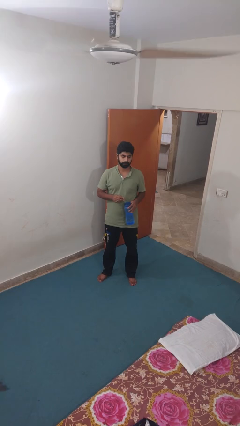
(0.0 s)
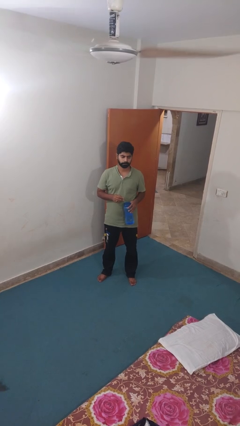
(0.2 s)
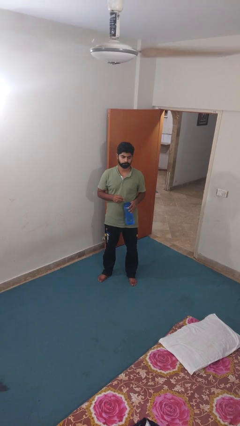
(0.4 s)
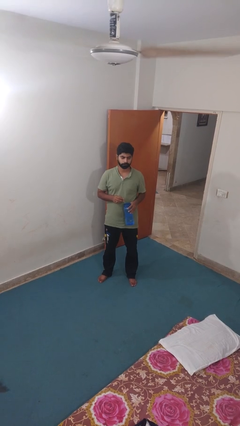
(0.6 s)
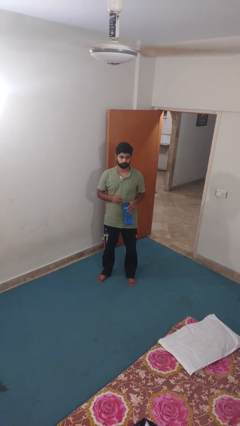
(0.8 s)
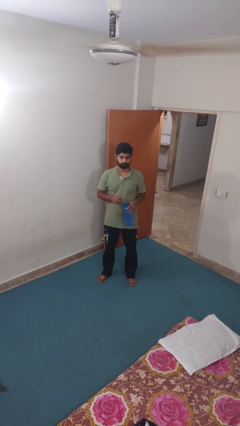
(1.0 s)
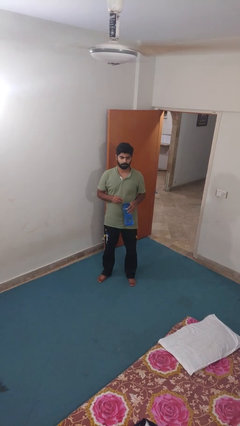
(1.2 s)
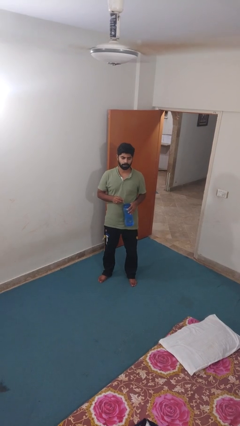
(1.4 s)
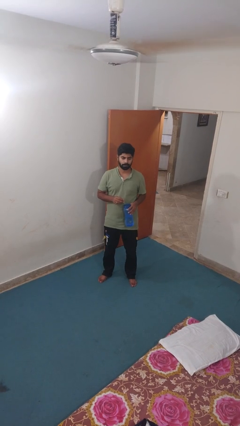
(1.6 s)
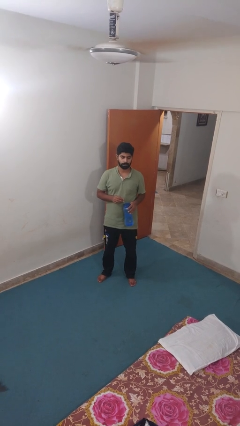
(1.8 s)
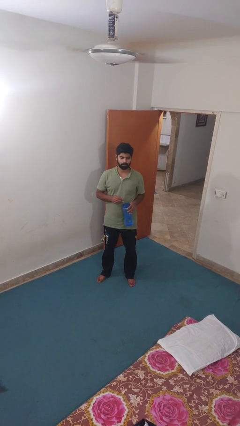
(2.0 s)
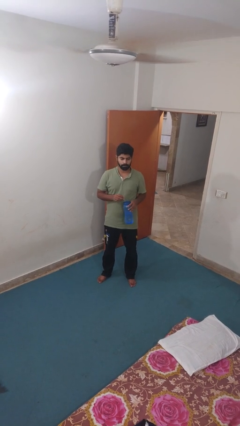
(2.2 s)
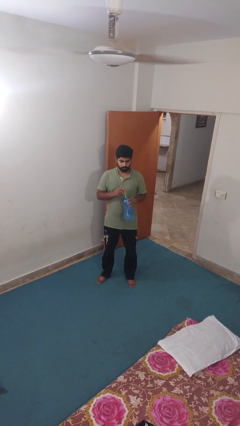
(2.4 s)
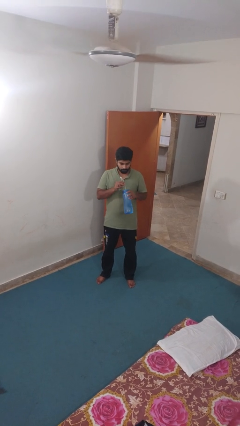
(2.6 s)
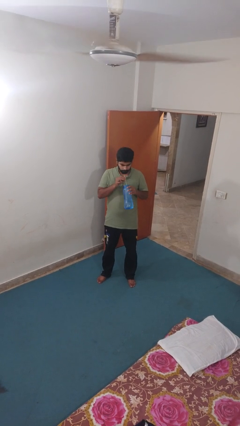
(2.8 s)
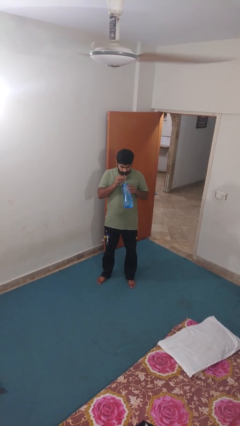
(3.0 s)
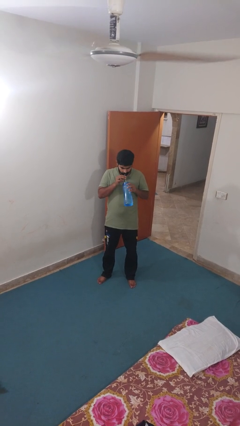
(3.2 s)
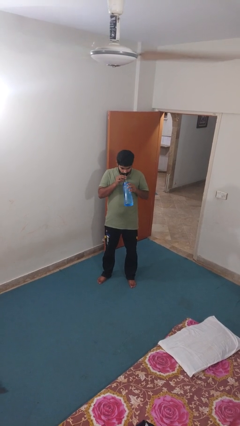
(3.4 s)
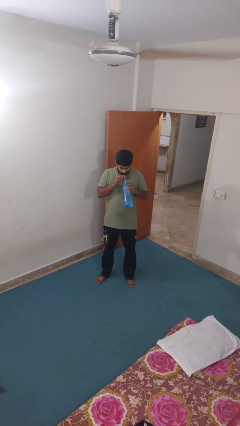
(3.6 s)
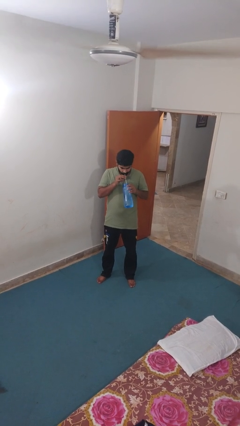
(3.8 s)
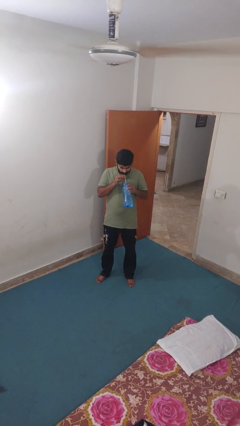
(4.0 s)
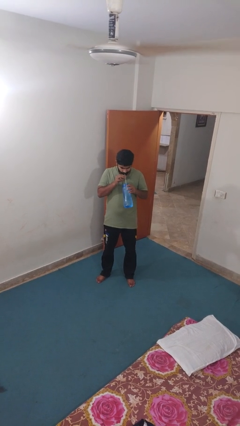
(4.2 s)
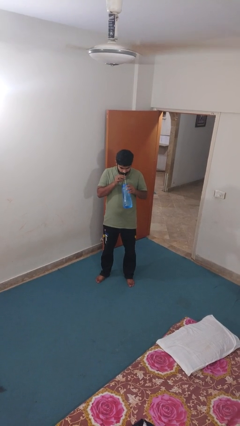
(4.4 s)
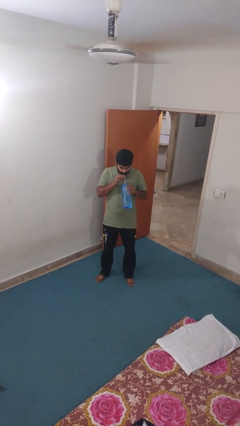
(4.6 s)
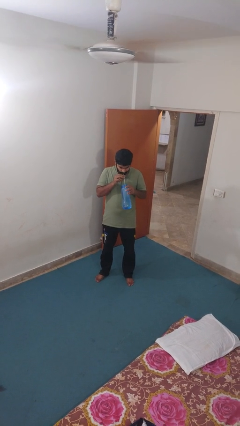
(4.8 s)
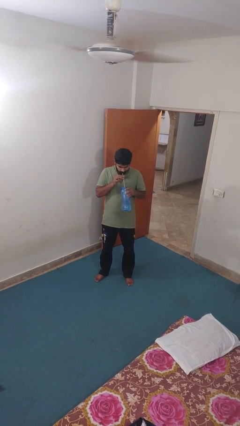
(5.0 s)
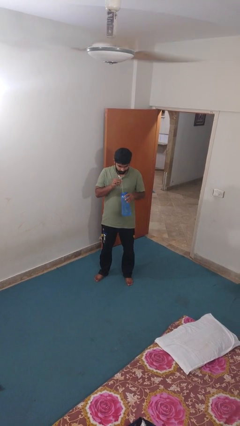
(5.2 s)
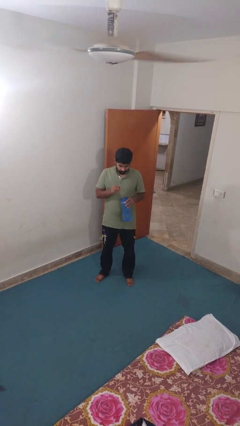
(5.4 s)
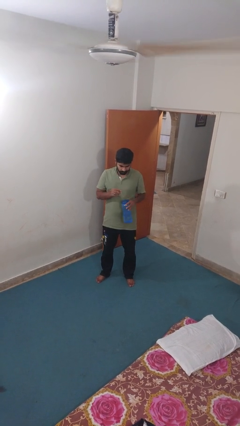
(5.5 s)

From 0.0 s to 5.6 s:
person drinks from straw

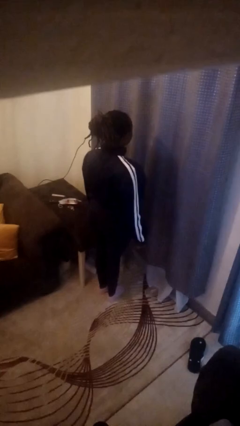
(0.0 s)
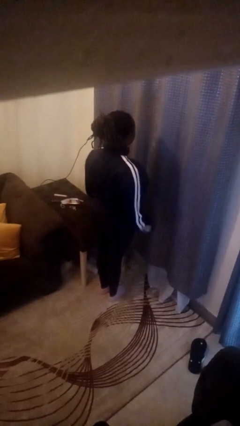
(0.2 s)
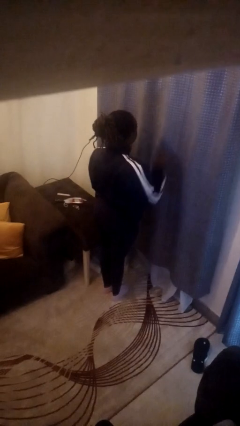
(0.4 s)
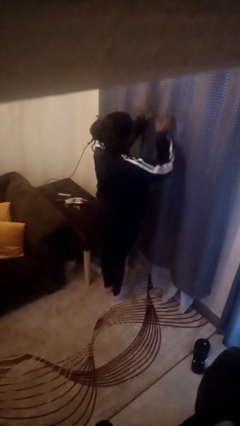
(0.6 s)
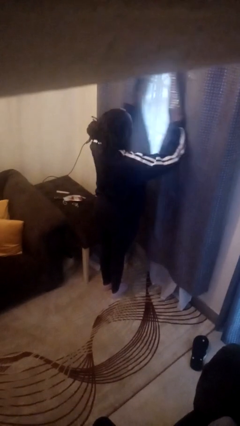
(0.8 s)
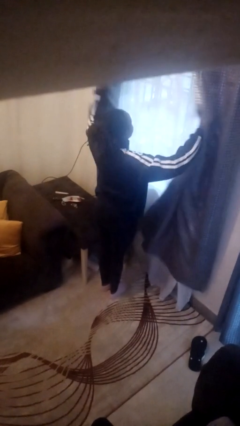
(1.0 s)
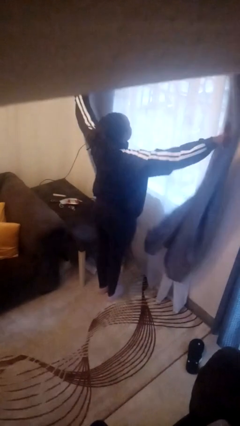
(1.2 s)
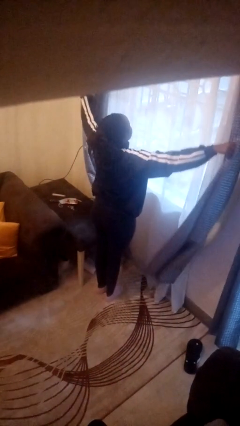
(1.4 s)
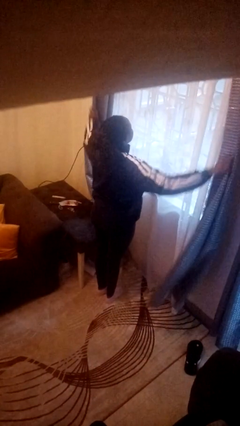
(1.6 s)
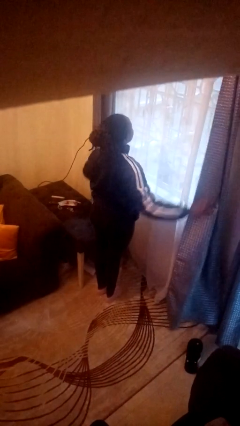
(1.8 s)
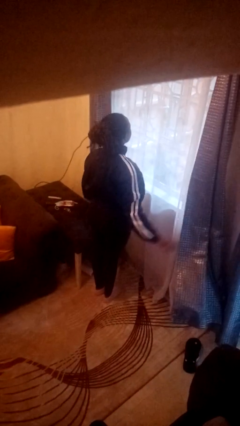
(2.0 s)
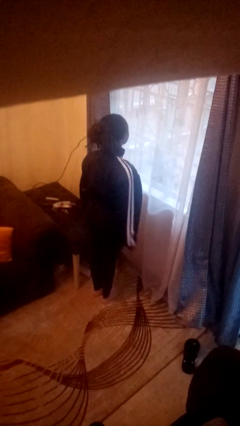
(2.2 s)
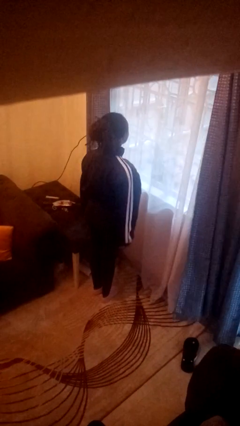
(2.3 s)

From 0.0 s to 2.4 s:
person opens curtains

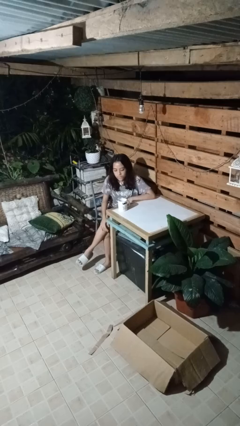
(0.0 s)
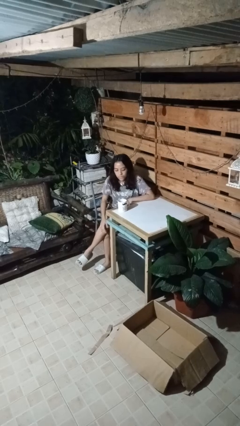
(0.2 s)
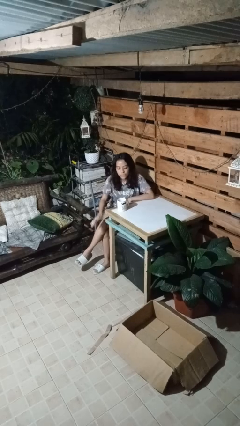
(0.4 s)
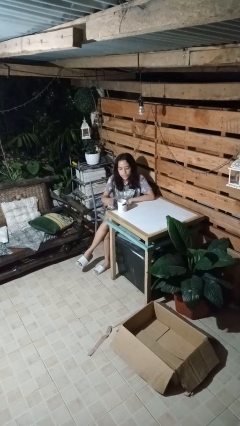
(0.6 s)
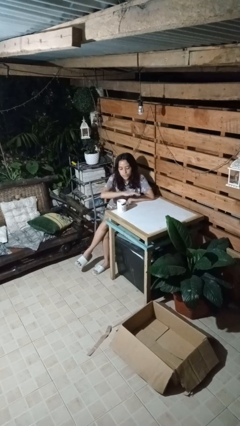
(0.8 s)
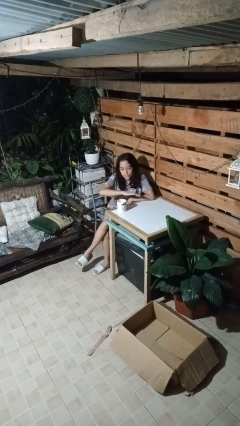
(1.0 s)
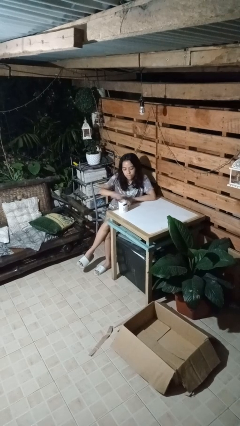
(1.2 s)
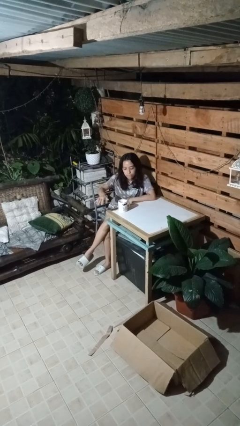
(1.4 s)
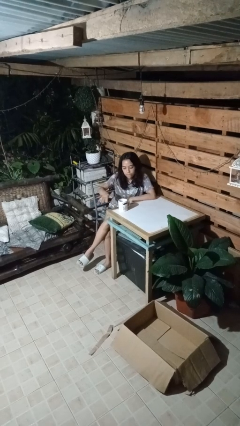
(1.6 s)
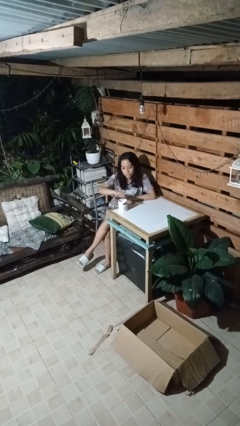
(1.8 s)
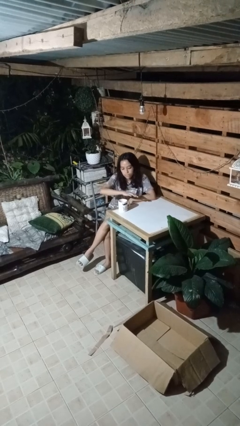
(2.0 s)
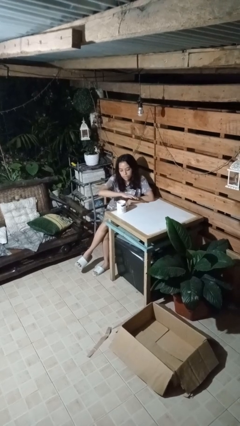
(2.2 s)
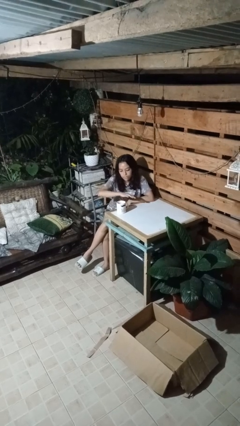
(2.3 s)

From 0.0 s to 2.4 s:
person waves hand over object

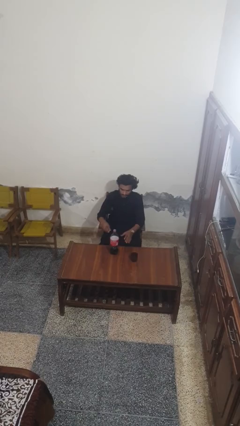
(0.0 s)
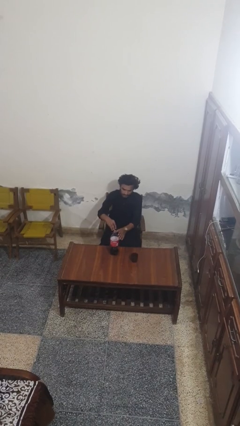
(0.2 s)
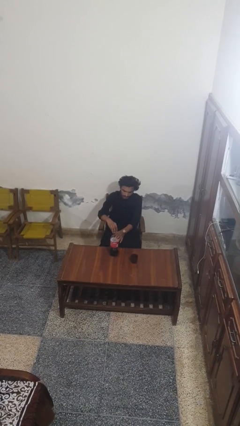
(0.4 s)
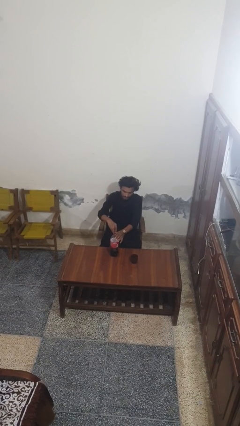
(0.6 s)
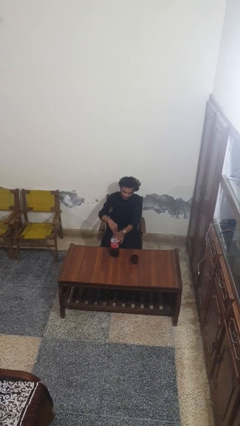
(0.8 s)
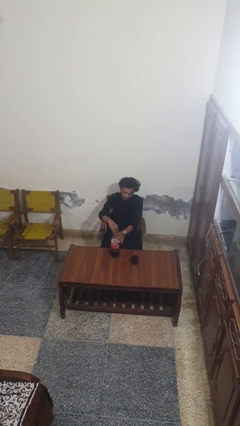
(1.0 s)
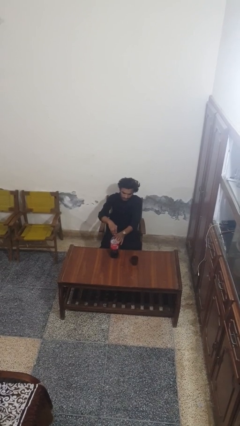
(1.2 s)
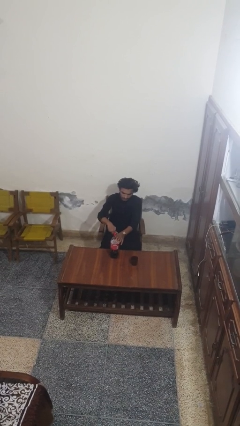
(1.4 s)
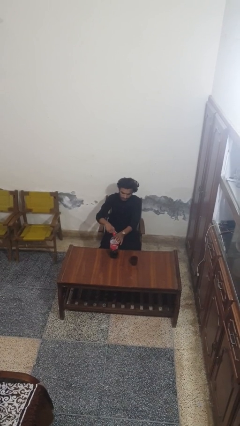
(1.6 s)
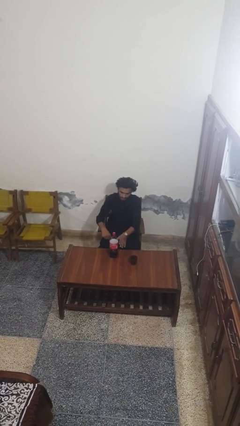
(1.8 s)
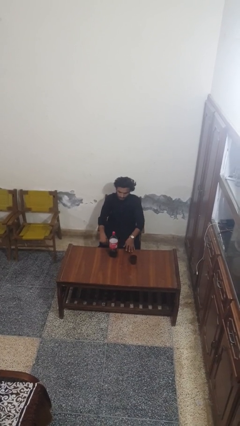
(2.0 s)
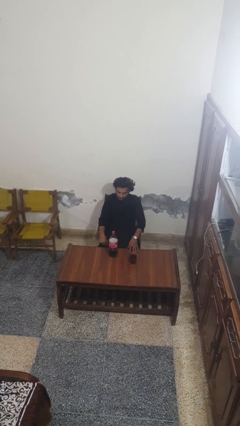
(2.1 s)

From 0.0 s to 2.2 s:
person screws lid to bottle

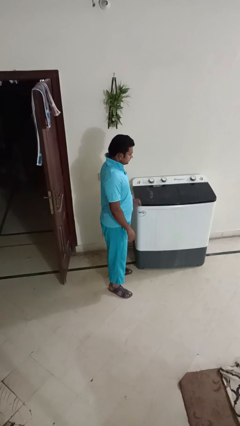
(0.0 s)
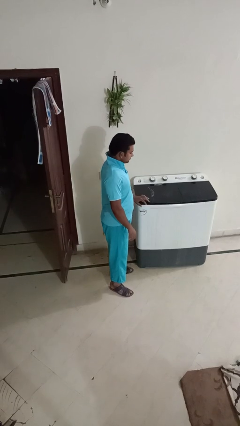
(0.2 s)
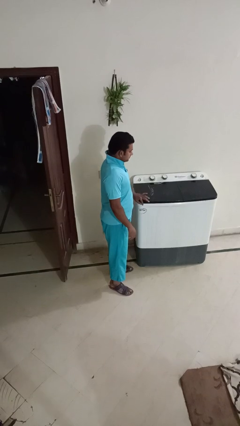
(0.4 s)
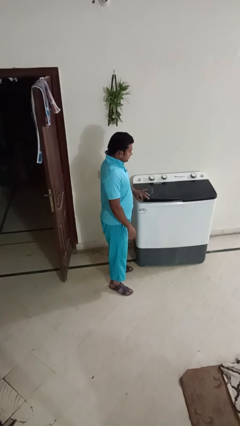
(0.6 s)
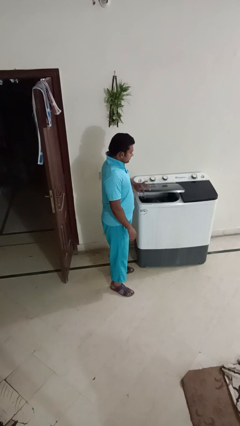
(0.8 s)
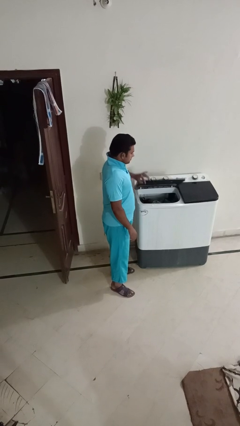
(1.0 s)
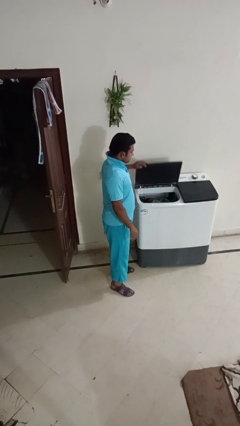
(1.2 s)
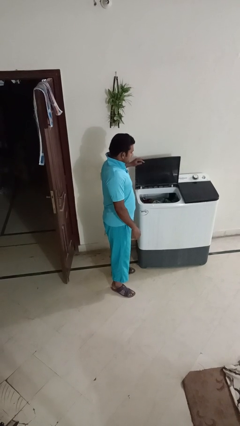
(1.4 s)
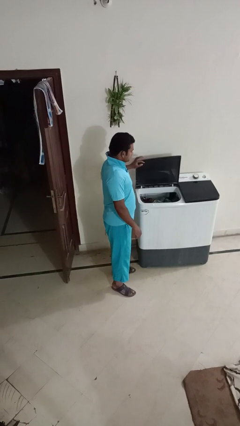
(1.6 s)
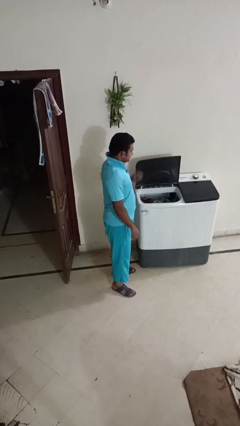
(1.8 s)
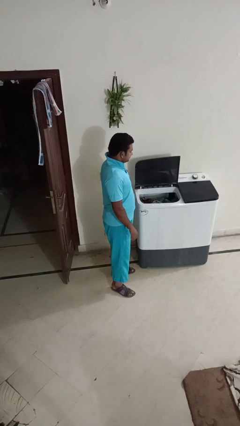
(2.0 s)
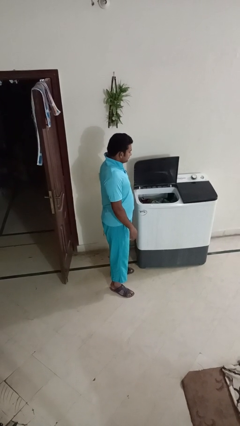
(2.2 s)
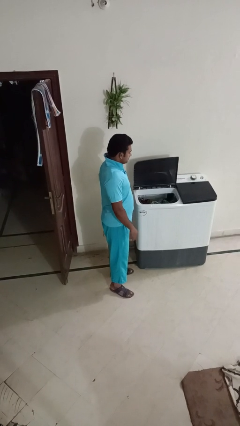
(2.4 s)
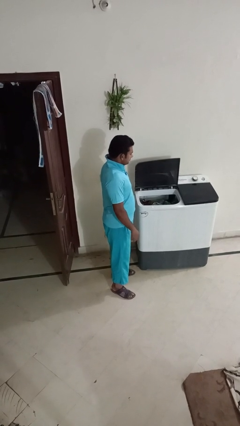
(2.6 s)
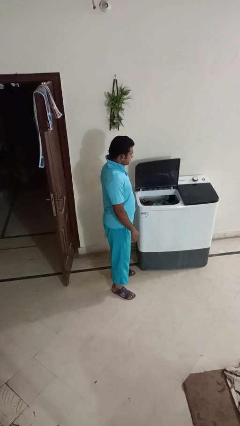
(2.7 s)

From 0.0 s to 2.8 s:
person opens clothes washer

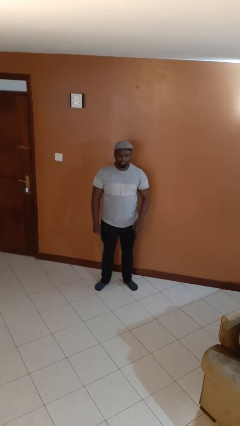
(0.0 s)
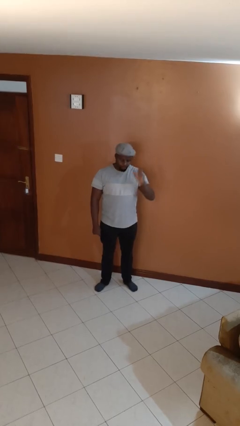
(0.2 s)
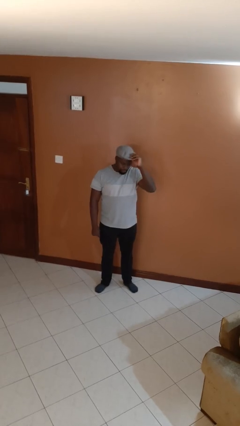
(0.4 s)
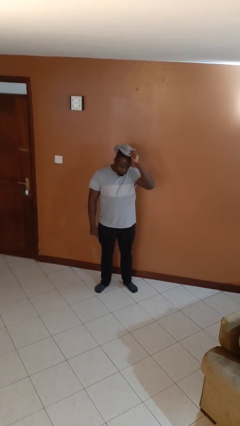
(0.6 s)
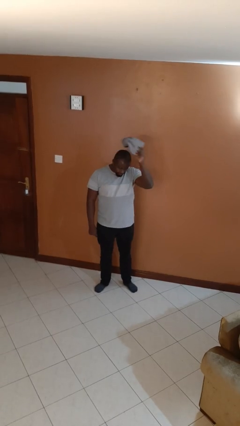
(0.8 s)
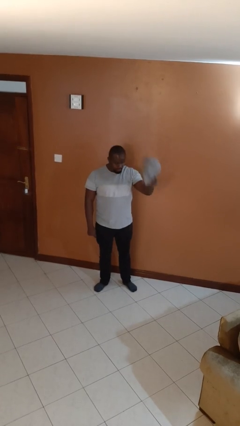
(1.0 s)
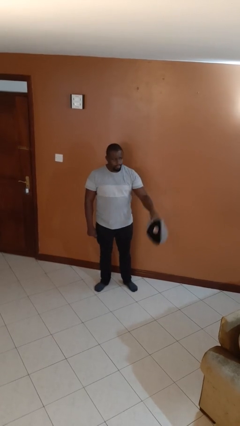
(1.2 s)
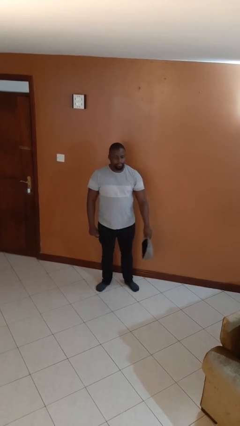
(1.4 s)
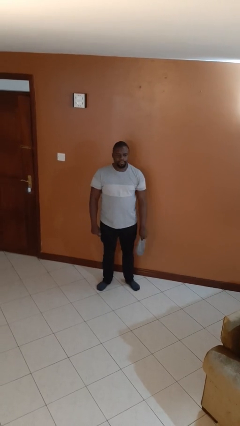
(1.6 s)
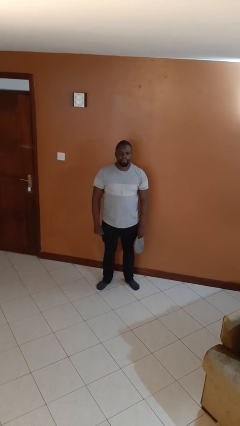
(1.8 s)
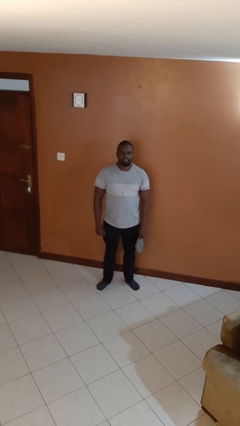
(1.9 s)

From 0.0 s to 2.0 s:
person takes off hat
